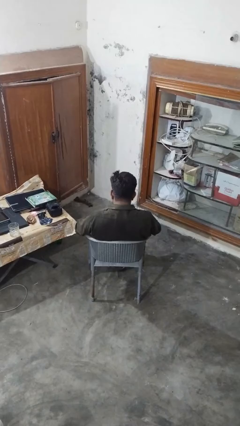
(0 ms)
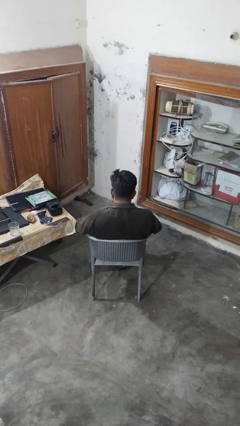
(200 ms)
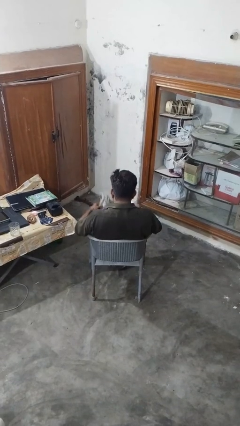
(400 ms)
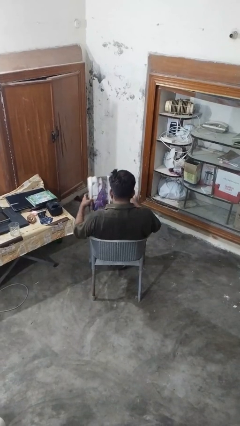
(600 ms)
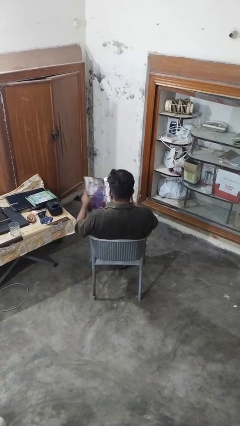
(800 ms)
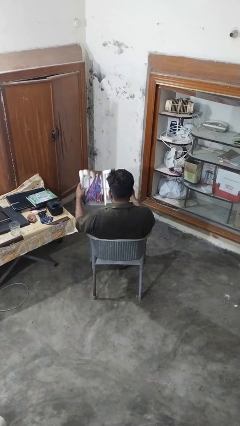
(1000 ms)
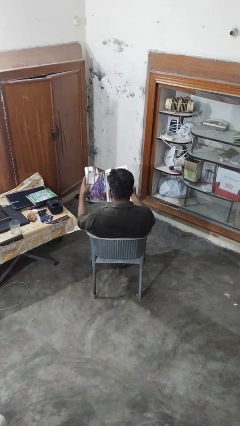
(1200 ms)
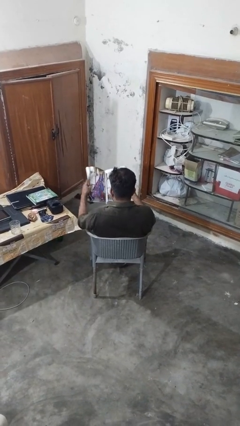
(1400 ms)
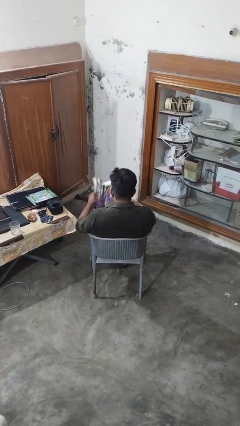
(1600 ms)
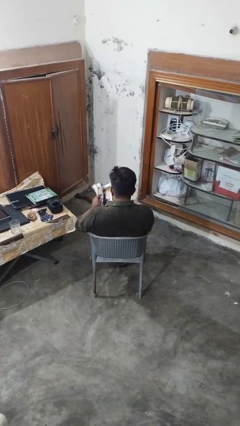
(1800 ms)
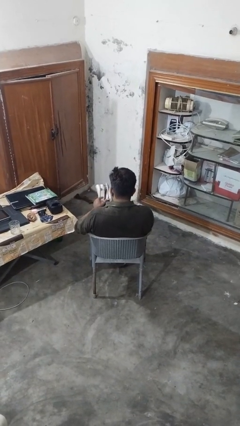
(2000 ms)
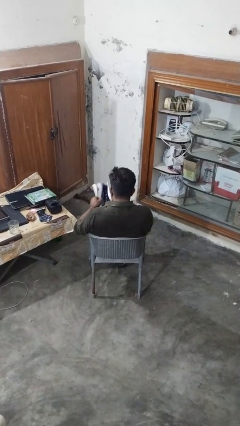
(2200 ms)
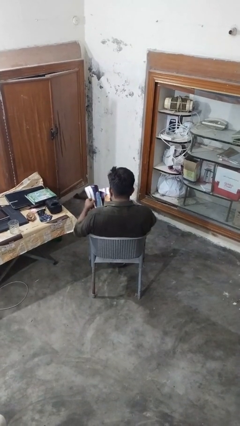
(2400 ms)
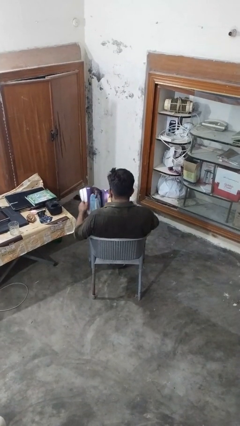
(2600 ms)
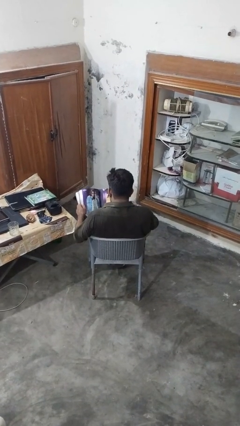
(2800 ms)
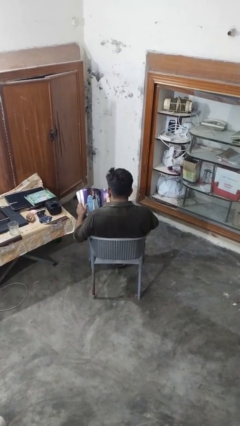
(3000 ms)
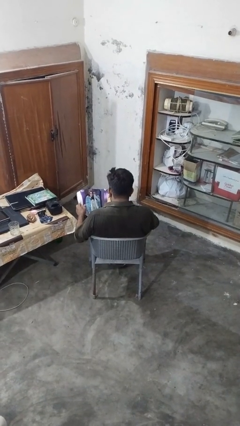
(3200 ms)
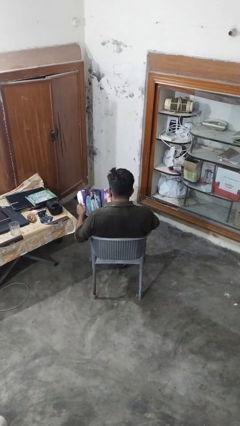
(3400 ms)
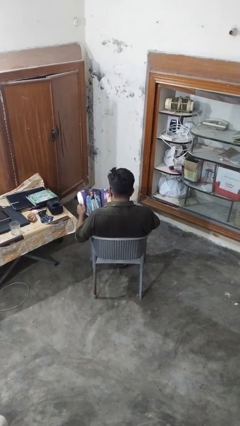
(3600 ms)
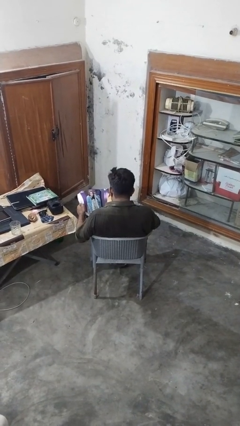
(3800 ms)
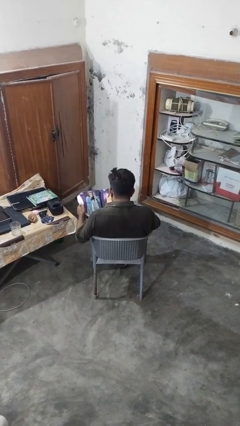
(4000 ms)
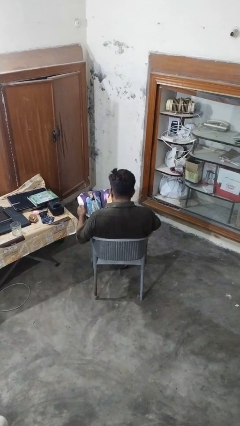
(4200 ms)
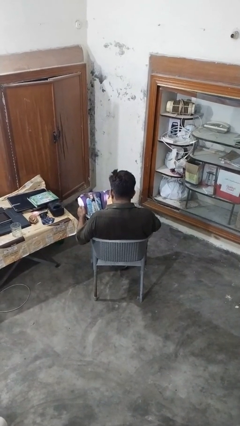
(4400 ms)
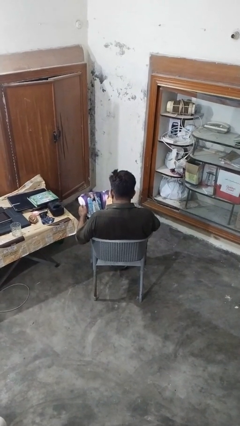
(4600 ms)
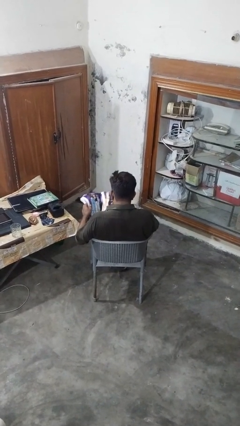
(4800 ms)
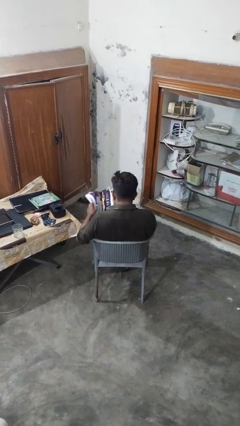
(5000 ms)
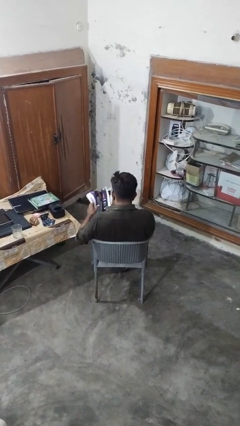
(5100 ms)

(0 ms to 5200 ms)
person reads magazine

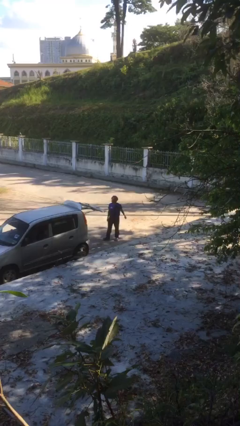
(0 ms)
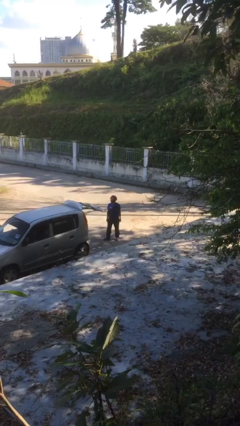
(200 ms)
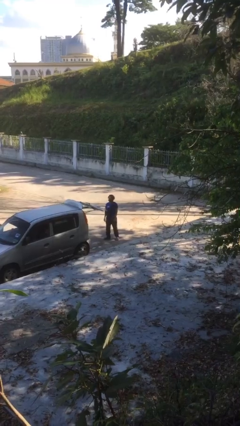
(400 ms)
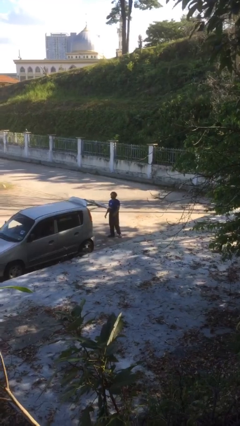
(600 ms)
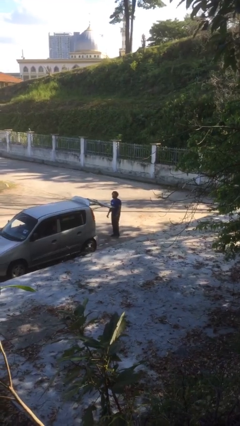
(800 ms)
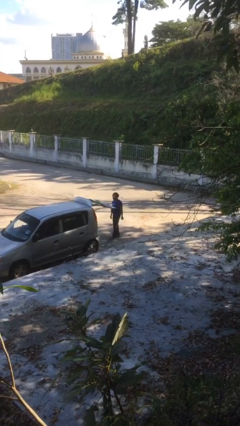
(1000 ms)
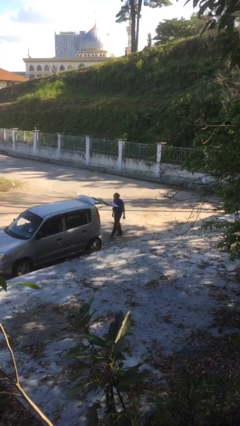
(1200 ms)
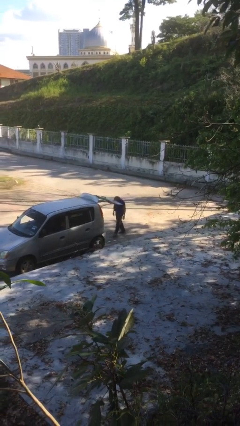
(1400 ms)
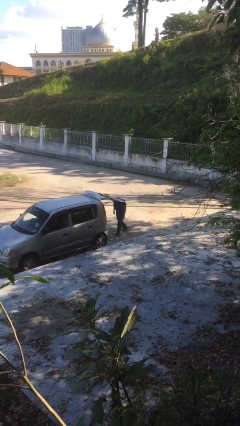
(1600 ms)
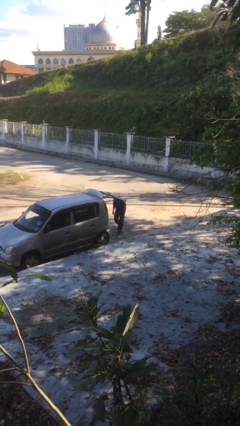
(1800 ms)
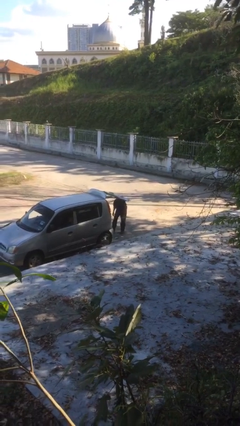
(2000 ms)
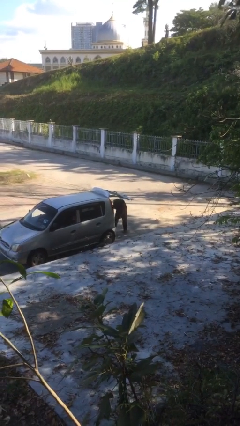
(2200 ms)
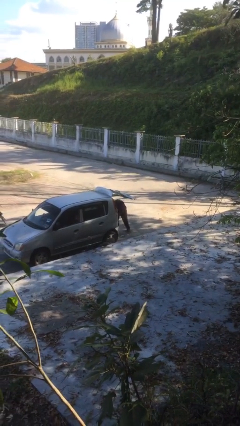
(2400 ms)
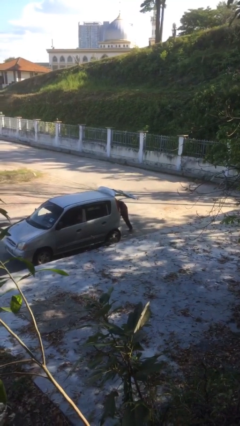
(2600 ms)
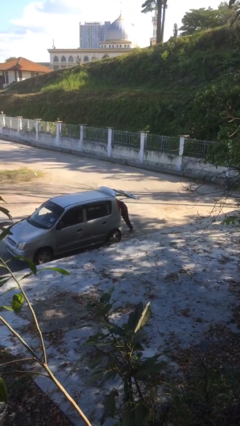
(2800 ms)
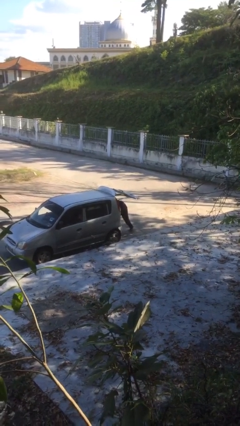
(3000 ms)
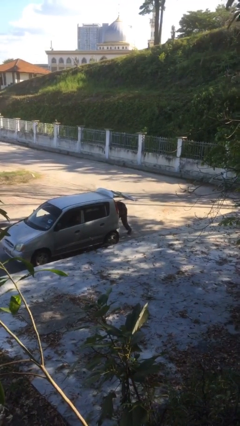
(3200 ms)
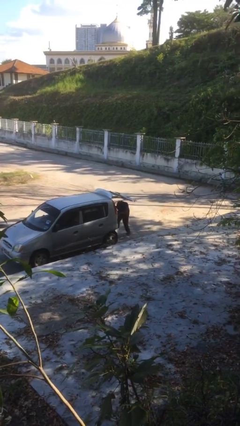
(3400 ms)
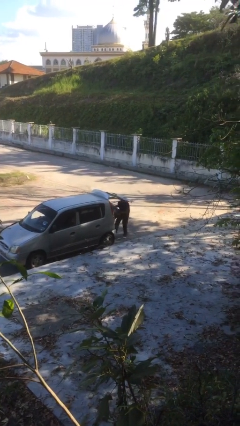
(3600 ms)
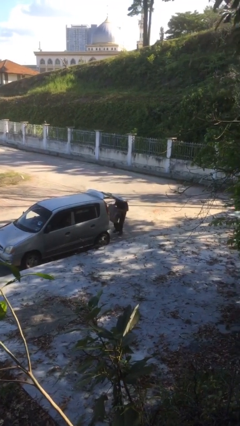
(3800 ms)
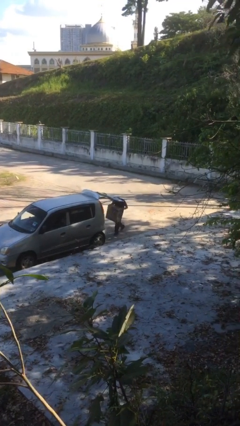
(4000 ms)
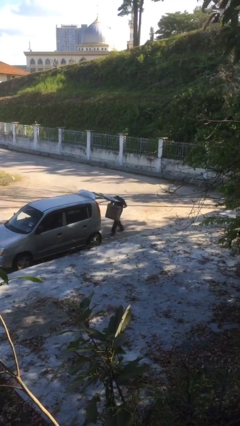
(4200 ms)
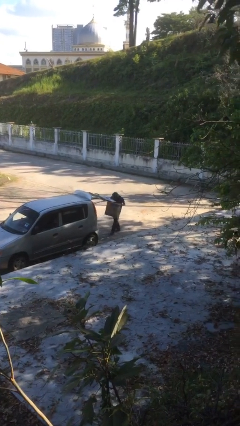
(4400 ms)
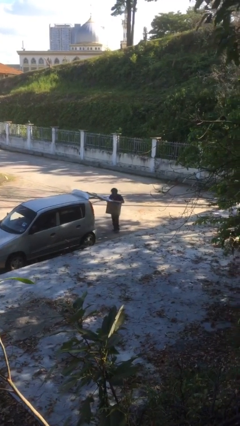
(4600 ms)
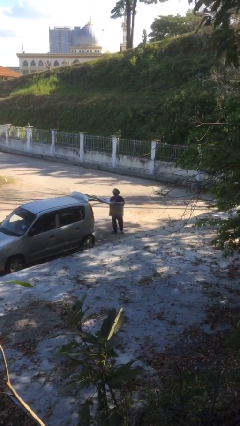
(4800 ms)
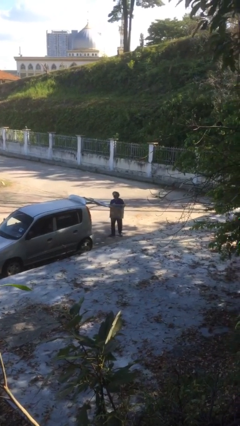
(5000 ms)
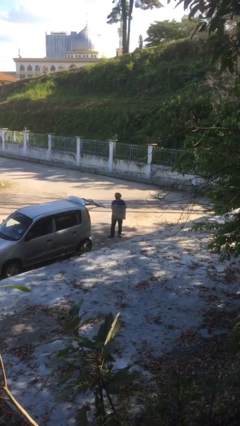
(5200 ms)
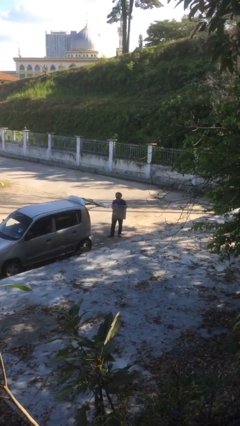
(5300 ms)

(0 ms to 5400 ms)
person unloads car

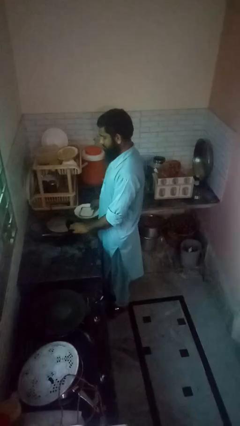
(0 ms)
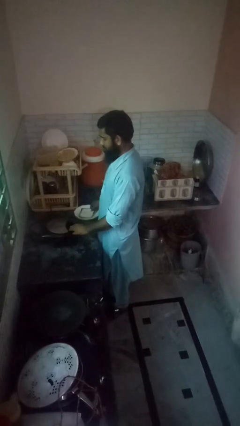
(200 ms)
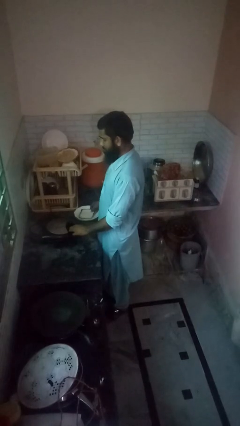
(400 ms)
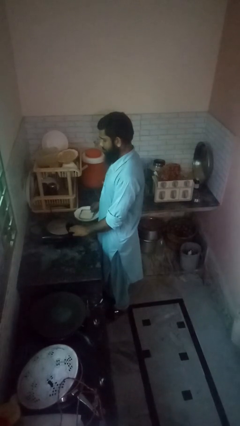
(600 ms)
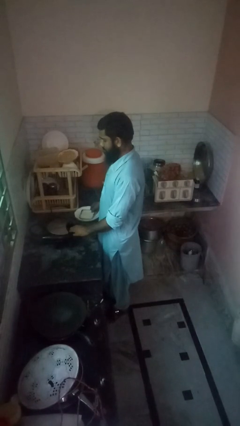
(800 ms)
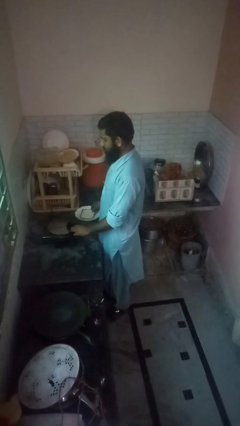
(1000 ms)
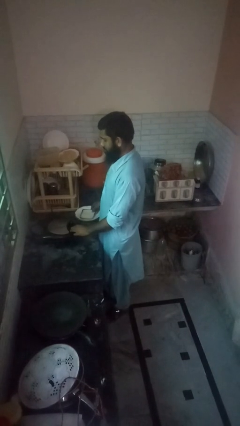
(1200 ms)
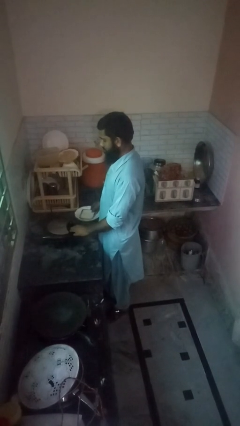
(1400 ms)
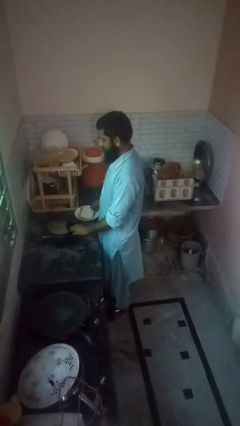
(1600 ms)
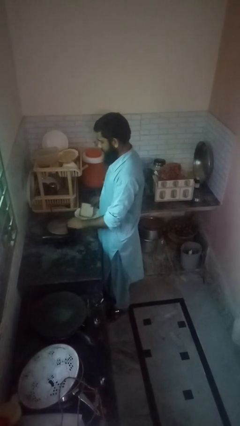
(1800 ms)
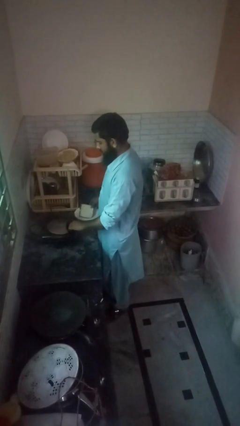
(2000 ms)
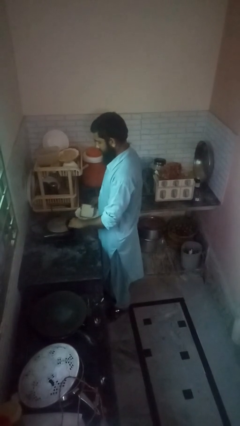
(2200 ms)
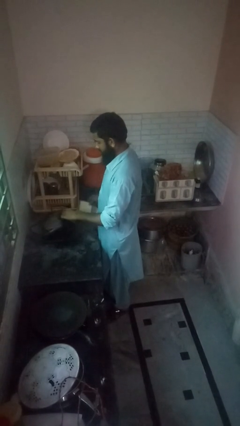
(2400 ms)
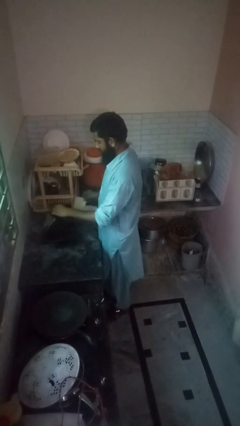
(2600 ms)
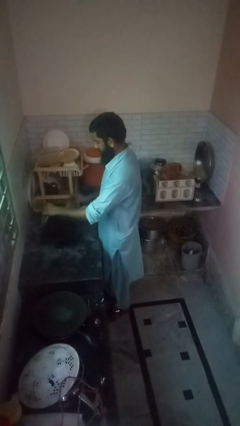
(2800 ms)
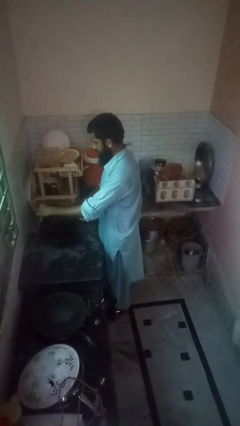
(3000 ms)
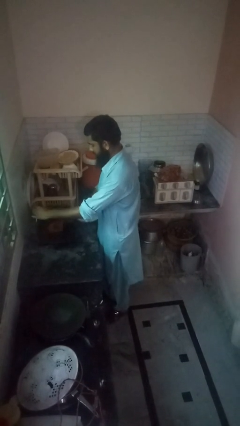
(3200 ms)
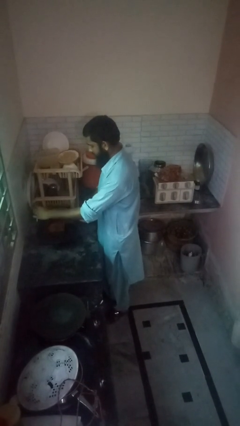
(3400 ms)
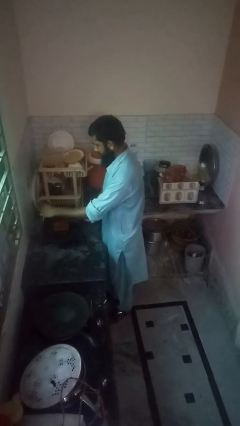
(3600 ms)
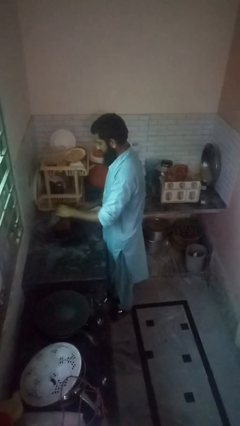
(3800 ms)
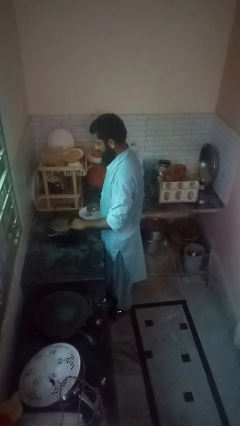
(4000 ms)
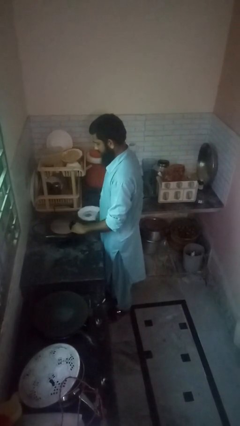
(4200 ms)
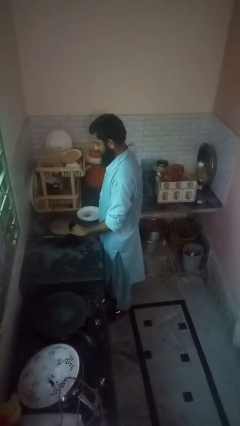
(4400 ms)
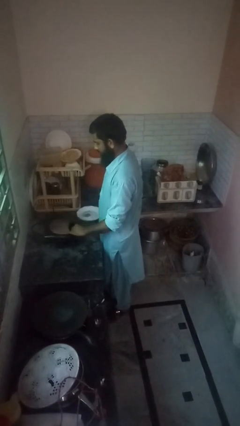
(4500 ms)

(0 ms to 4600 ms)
person puts object into toaster

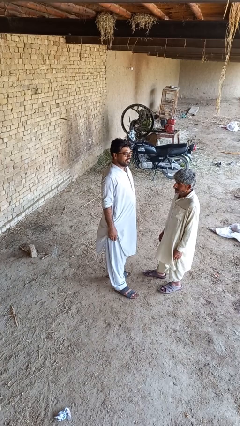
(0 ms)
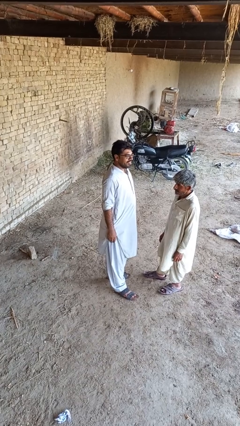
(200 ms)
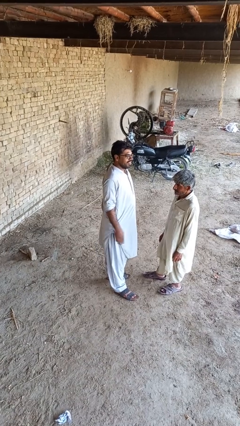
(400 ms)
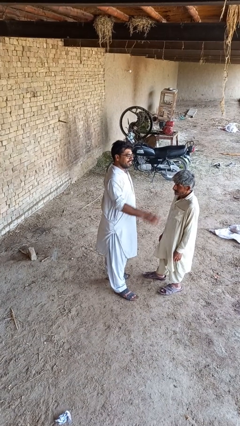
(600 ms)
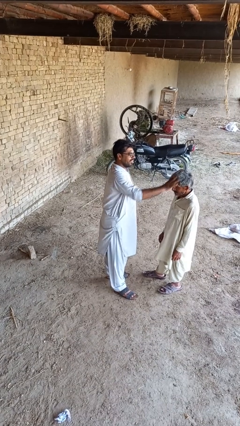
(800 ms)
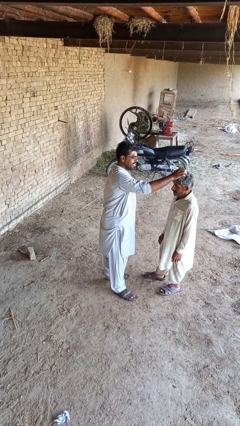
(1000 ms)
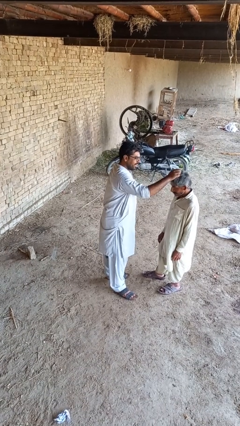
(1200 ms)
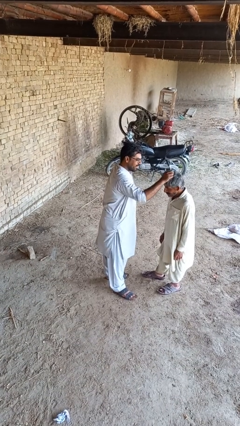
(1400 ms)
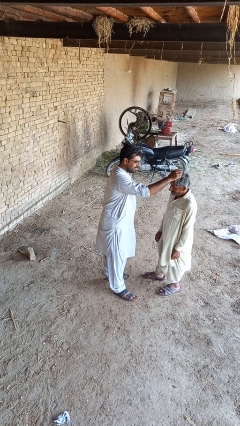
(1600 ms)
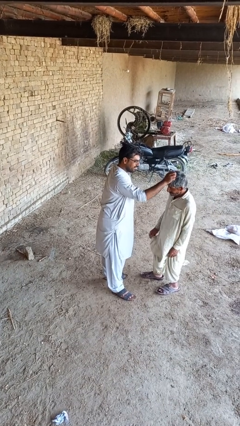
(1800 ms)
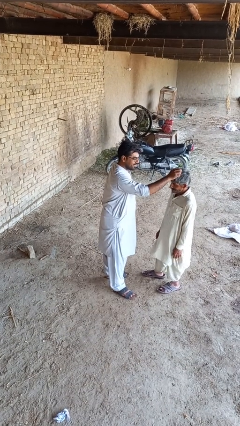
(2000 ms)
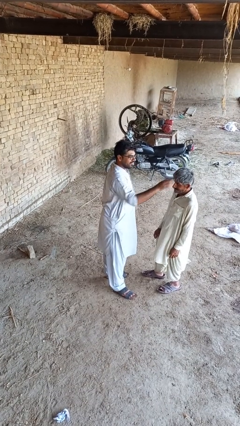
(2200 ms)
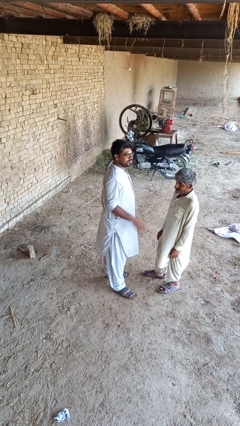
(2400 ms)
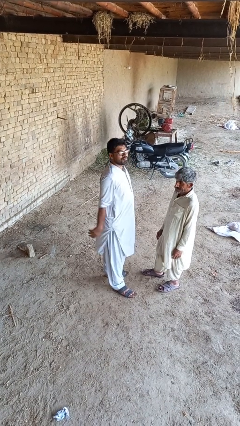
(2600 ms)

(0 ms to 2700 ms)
person grabs person by hair
